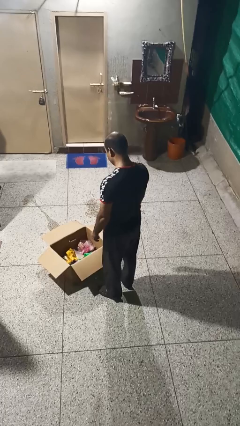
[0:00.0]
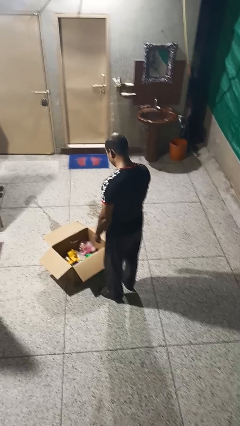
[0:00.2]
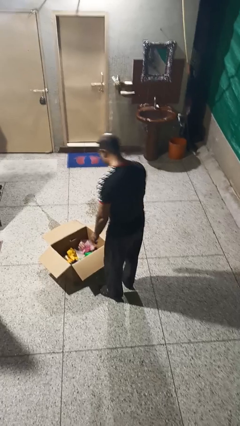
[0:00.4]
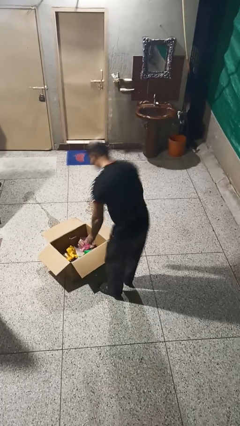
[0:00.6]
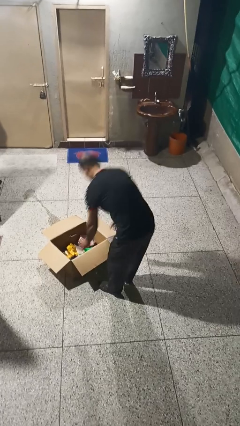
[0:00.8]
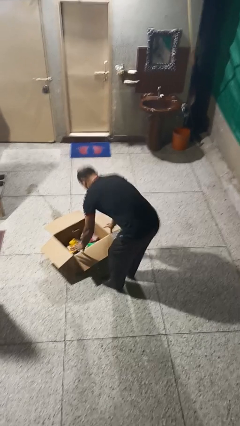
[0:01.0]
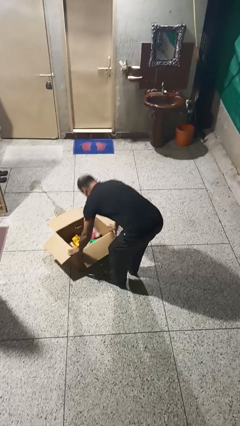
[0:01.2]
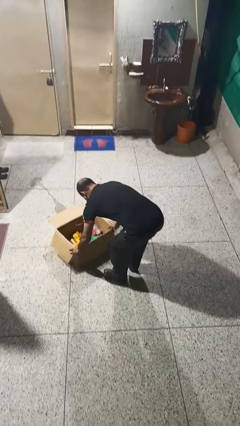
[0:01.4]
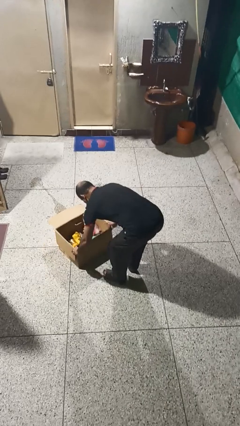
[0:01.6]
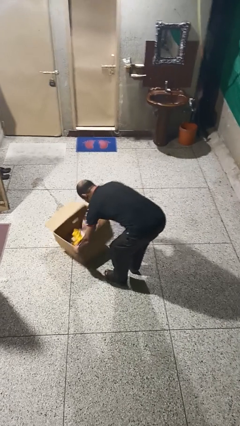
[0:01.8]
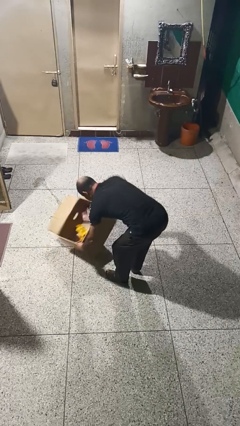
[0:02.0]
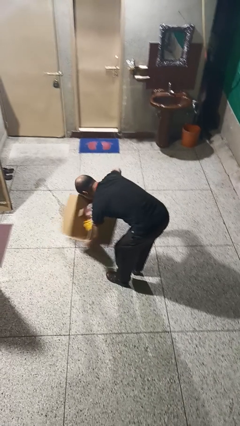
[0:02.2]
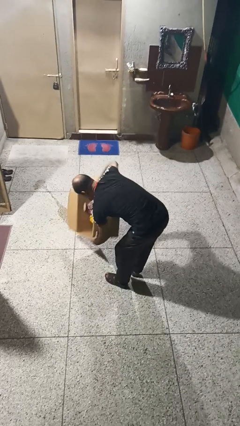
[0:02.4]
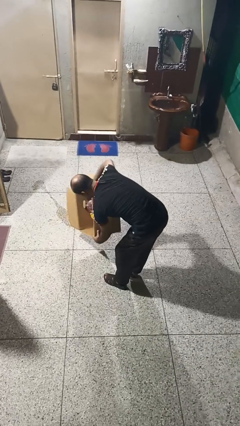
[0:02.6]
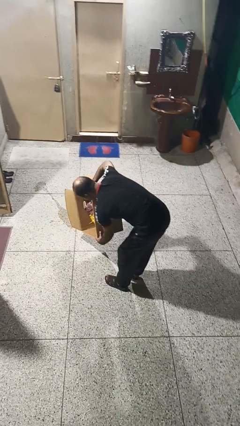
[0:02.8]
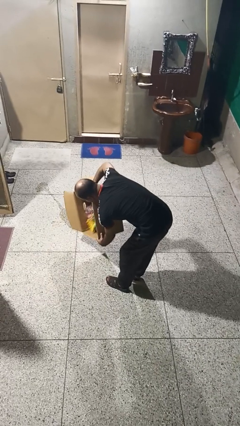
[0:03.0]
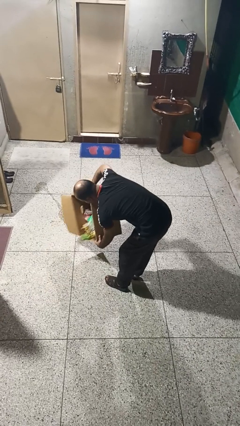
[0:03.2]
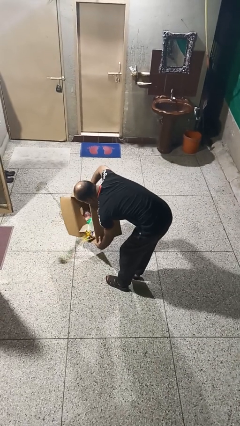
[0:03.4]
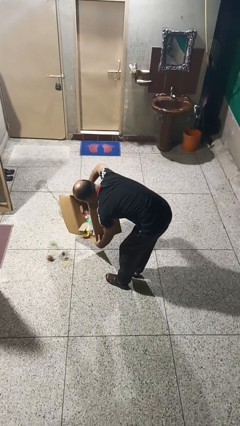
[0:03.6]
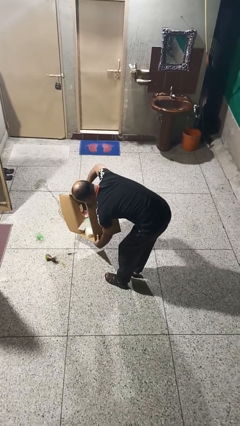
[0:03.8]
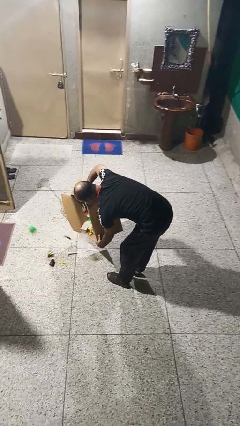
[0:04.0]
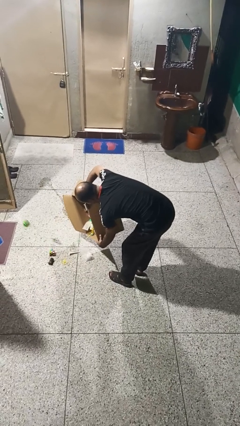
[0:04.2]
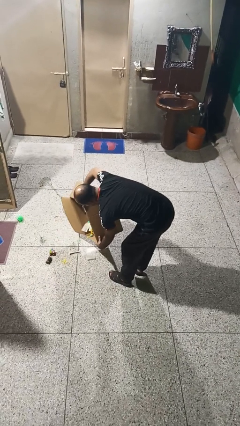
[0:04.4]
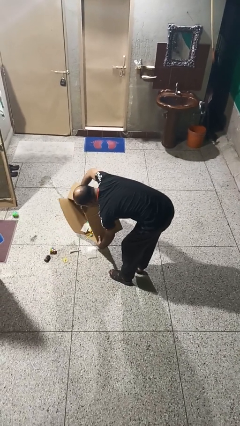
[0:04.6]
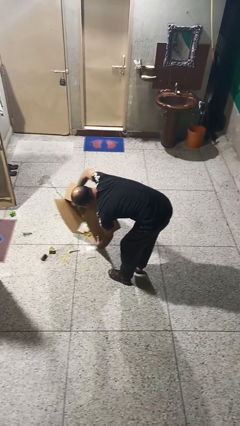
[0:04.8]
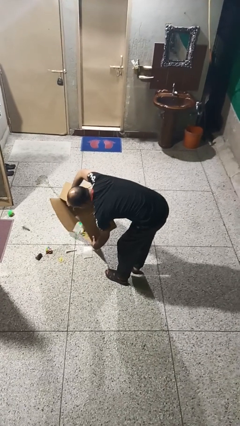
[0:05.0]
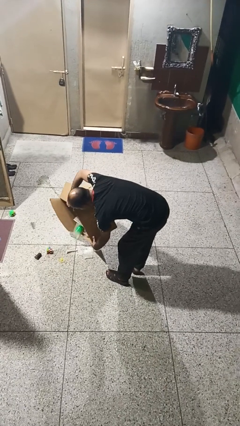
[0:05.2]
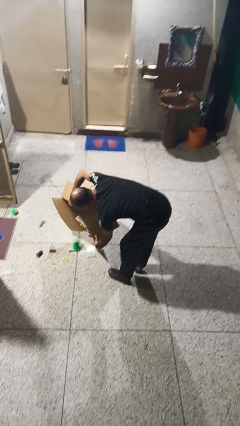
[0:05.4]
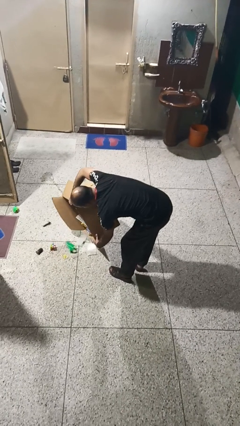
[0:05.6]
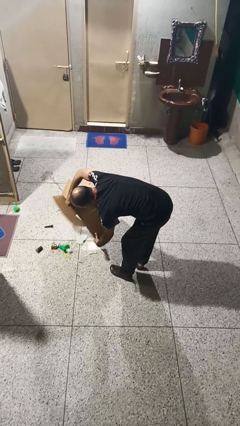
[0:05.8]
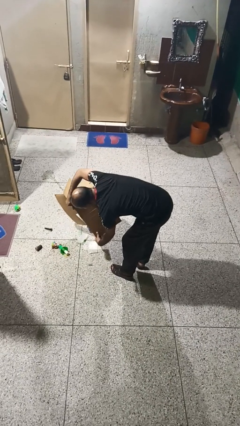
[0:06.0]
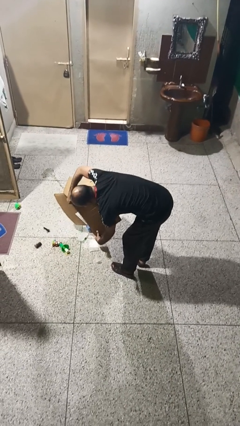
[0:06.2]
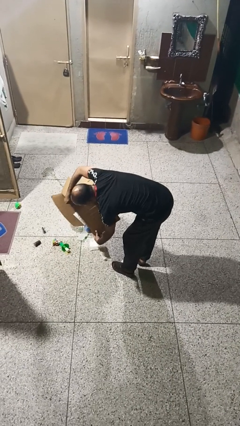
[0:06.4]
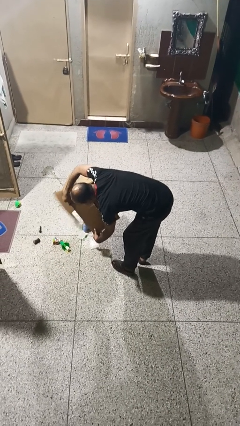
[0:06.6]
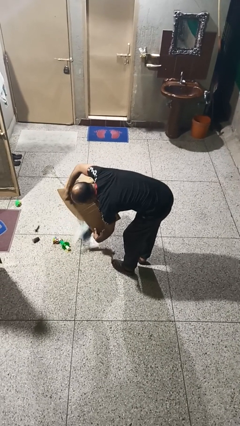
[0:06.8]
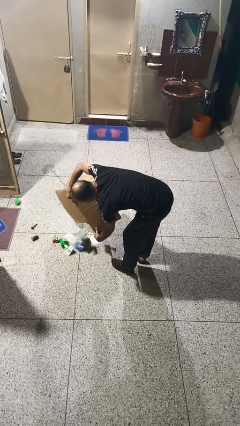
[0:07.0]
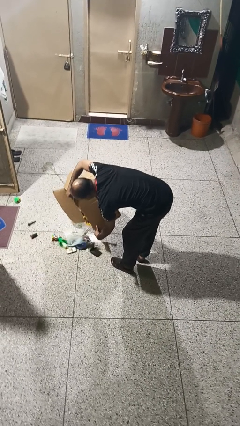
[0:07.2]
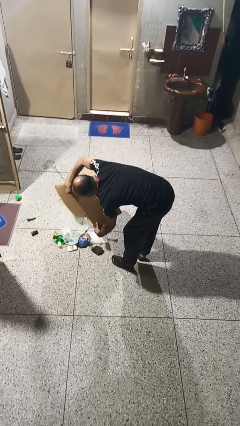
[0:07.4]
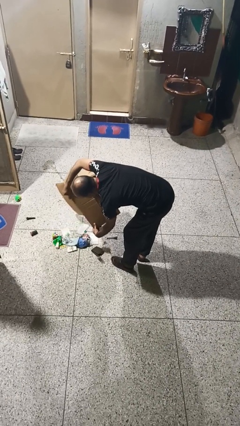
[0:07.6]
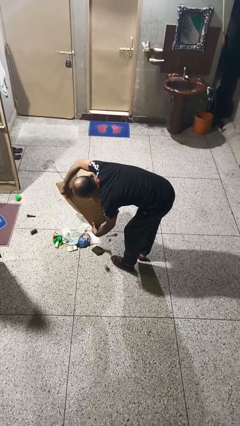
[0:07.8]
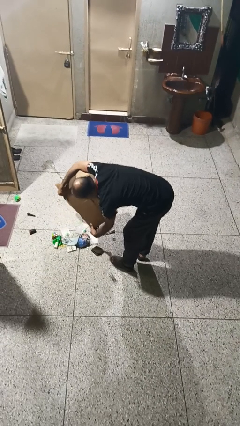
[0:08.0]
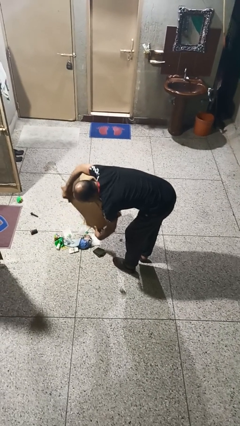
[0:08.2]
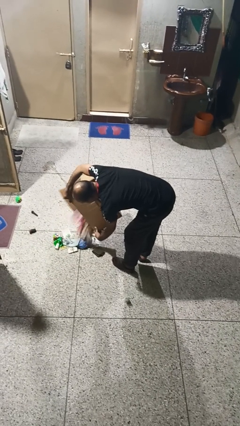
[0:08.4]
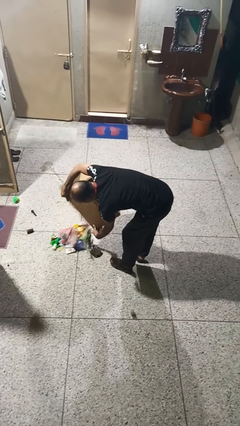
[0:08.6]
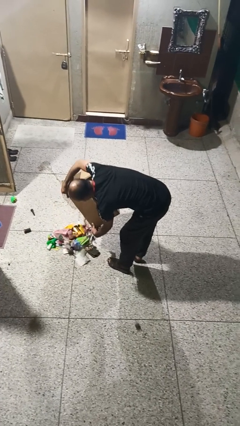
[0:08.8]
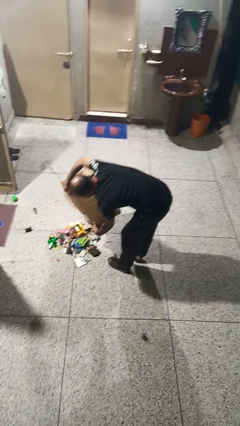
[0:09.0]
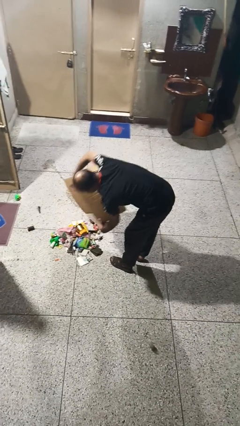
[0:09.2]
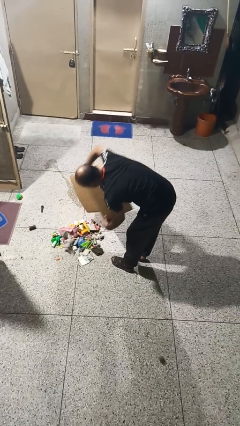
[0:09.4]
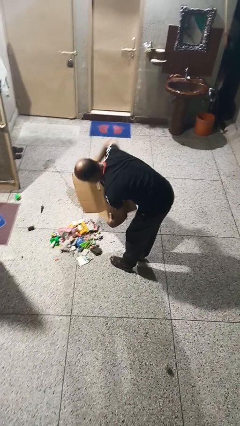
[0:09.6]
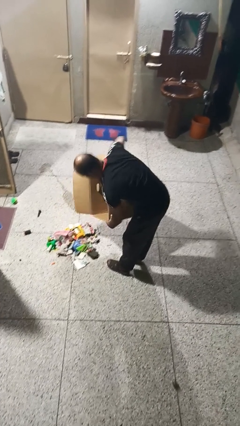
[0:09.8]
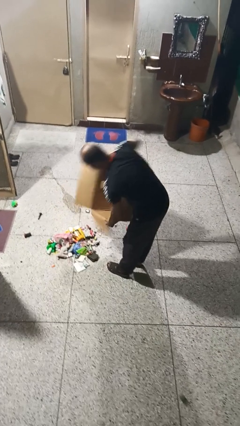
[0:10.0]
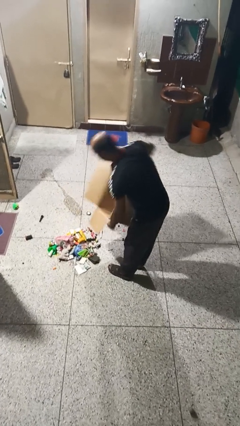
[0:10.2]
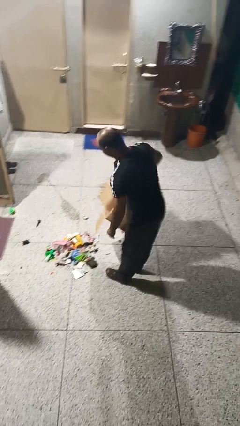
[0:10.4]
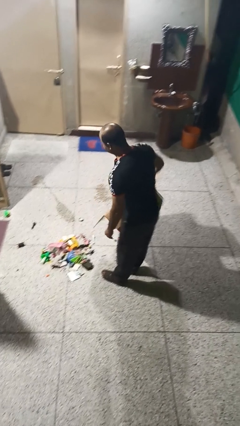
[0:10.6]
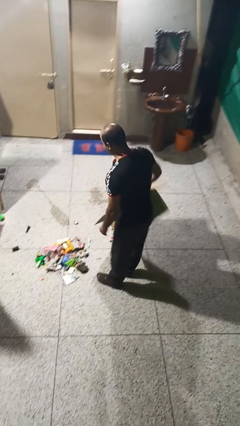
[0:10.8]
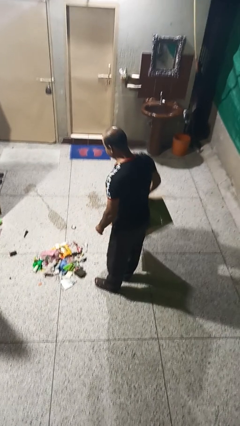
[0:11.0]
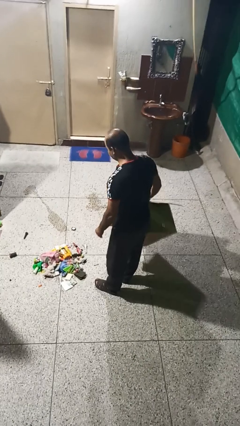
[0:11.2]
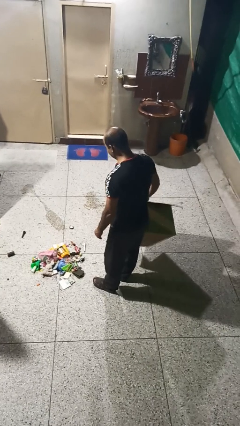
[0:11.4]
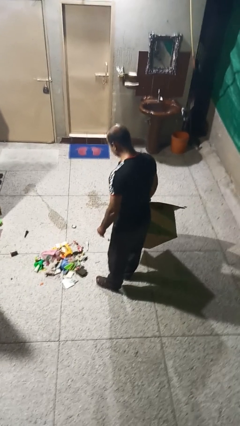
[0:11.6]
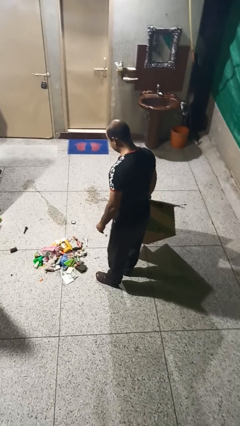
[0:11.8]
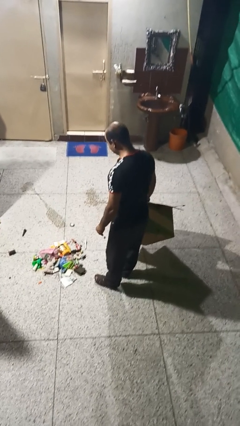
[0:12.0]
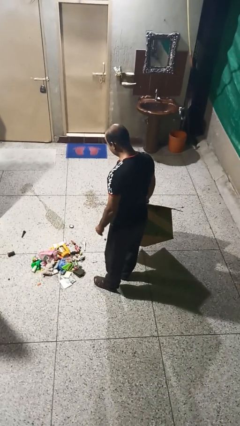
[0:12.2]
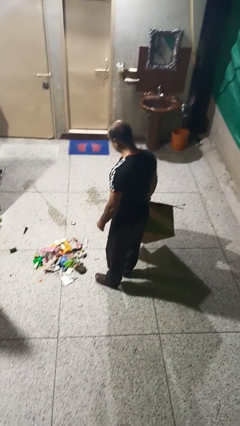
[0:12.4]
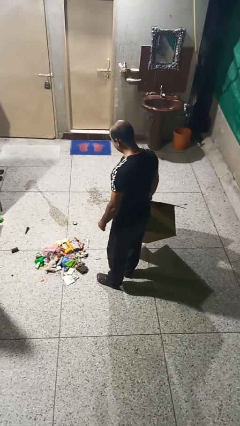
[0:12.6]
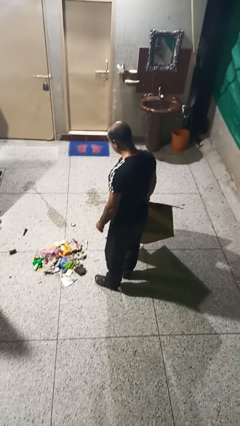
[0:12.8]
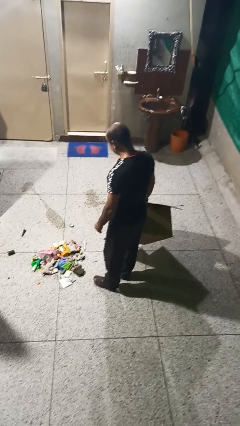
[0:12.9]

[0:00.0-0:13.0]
person unloads box onto floor

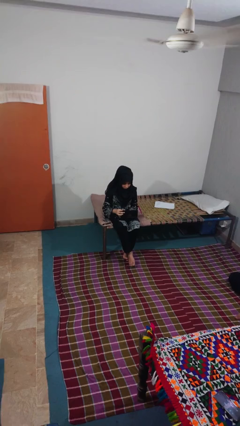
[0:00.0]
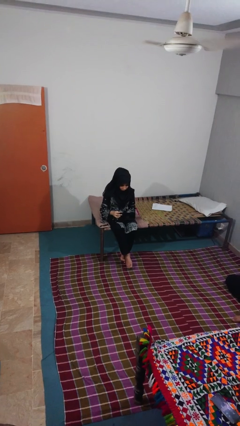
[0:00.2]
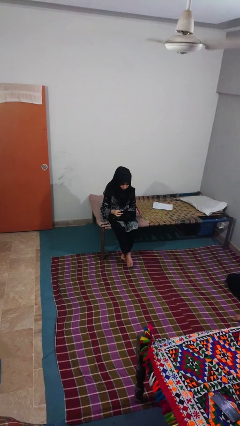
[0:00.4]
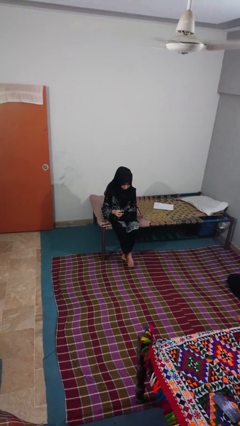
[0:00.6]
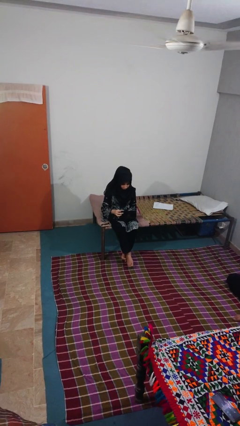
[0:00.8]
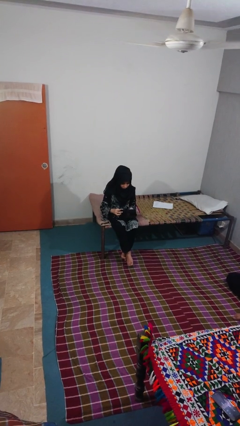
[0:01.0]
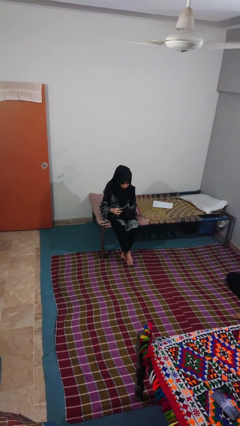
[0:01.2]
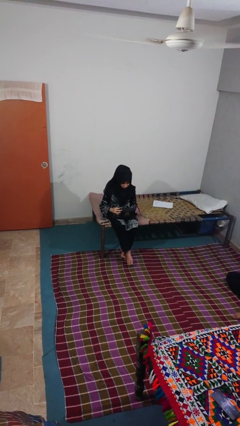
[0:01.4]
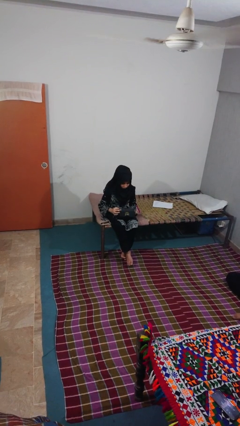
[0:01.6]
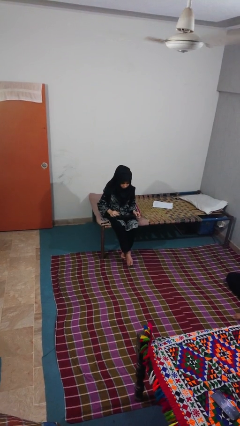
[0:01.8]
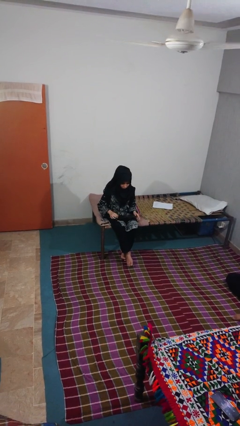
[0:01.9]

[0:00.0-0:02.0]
person closes jewelry box

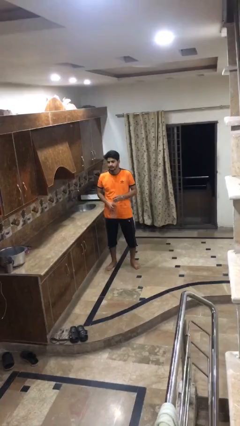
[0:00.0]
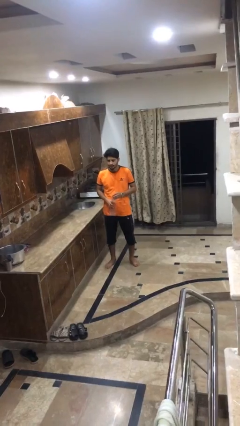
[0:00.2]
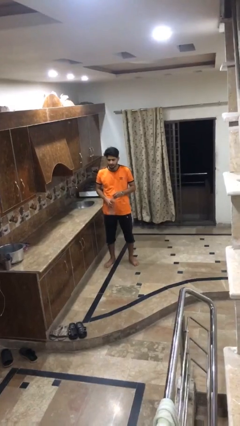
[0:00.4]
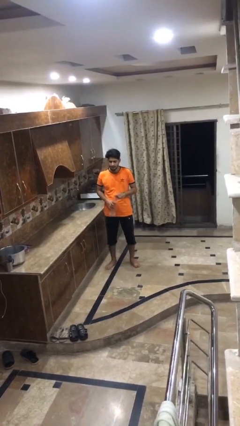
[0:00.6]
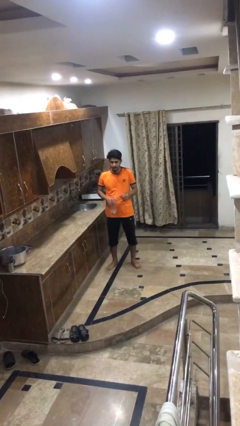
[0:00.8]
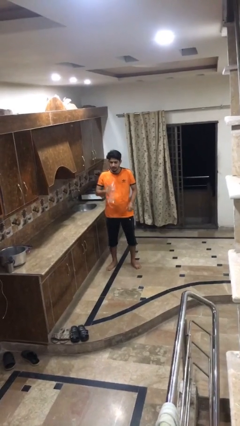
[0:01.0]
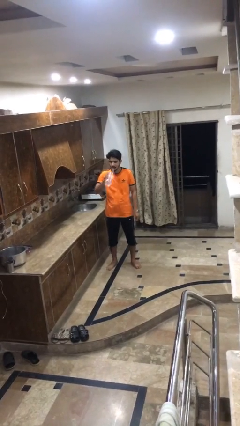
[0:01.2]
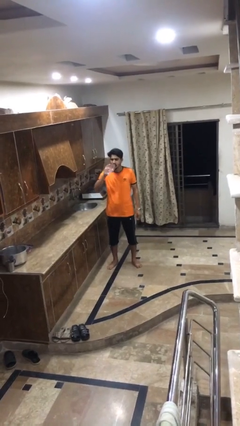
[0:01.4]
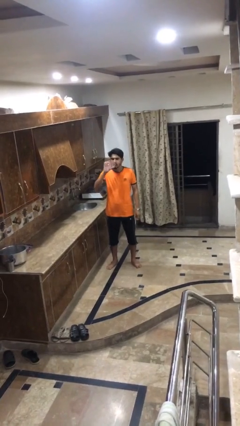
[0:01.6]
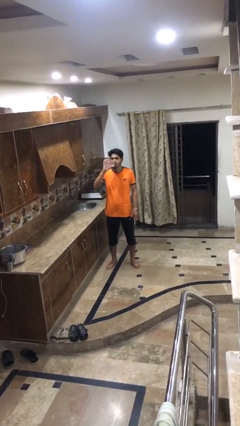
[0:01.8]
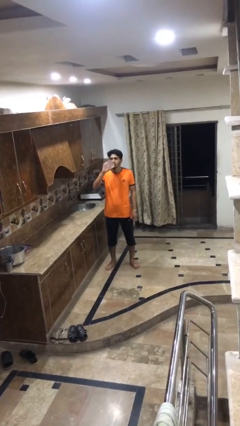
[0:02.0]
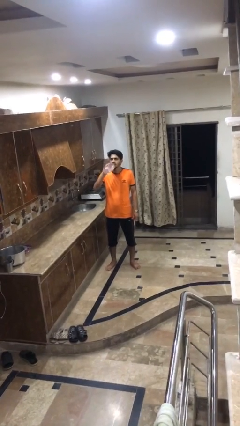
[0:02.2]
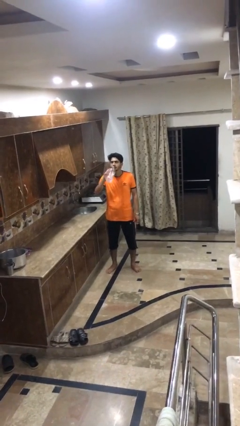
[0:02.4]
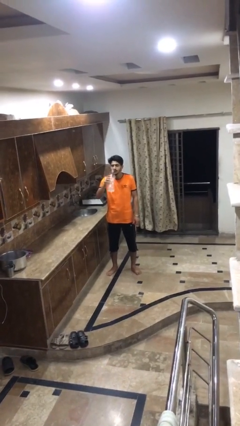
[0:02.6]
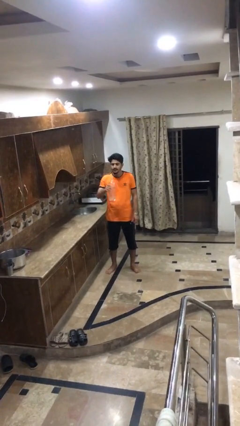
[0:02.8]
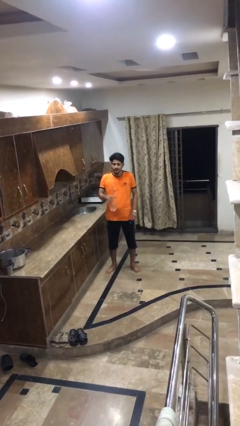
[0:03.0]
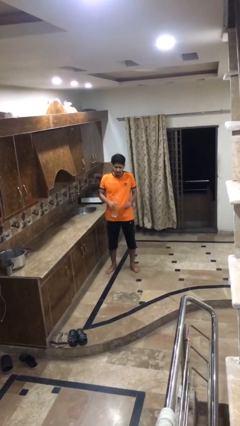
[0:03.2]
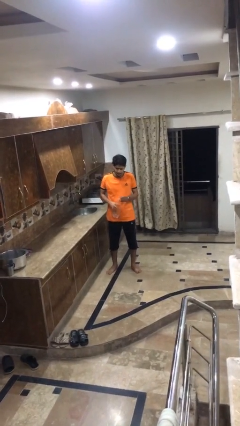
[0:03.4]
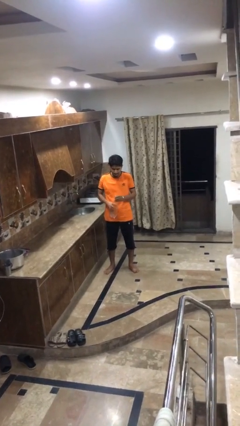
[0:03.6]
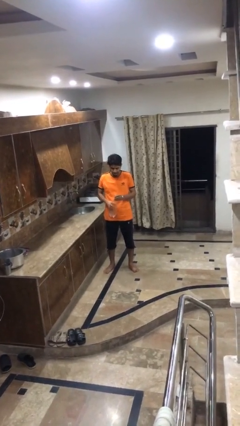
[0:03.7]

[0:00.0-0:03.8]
person drinks from bottle
